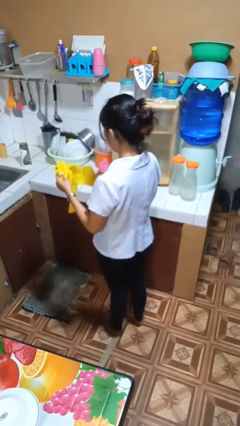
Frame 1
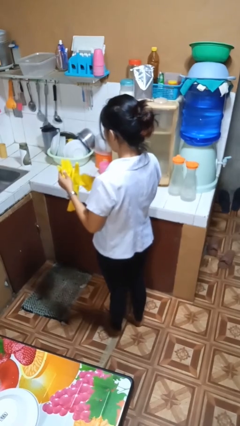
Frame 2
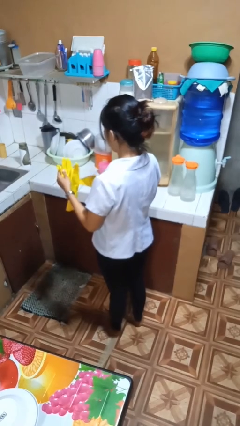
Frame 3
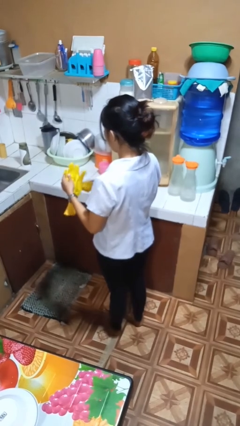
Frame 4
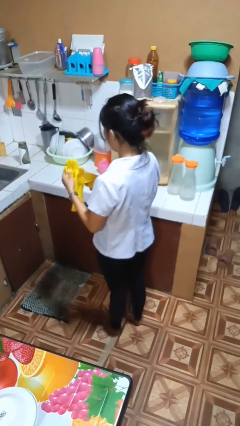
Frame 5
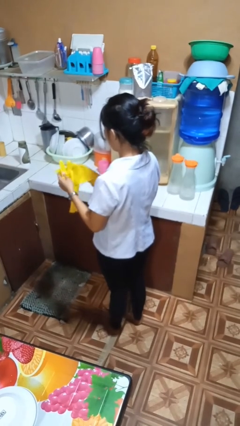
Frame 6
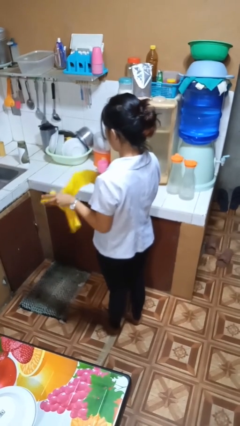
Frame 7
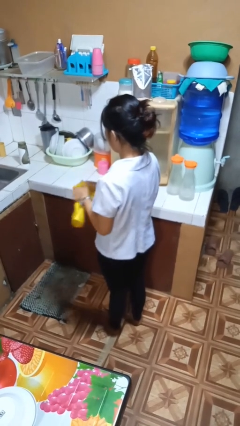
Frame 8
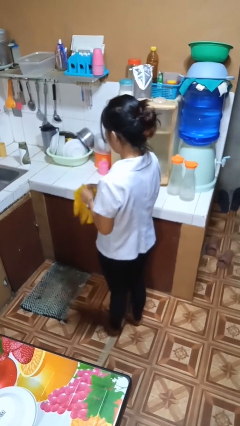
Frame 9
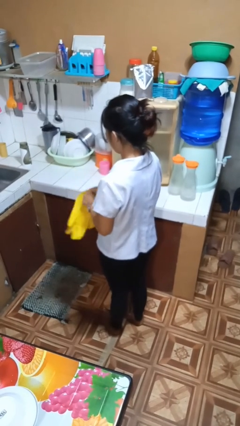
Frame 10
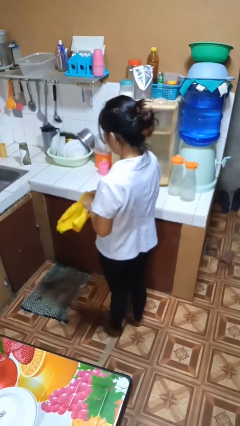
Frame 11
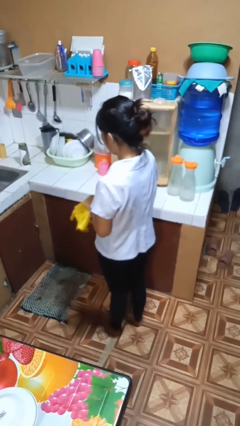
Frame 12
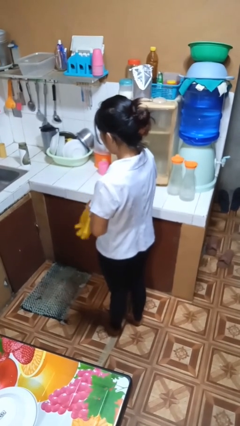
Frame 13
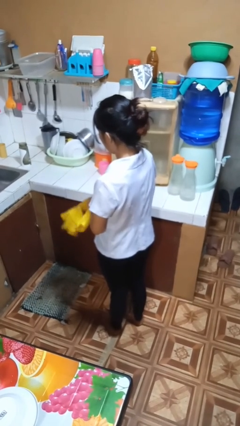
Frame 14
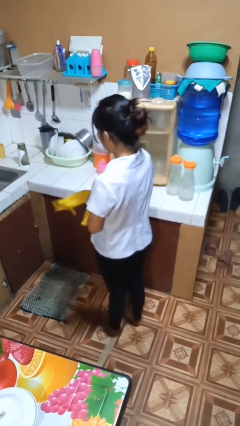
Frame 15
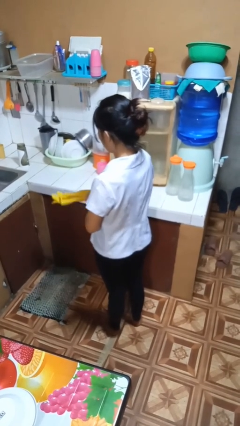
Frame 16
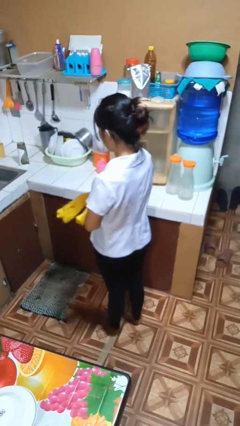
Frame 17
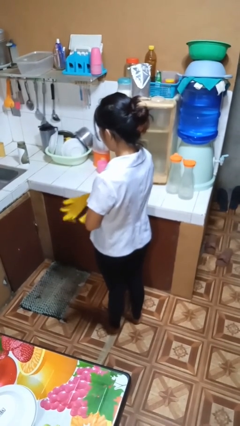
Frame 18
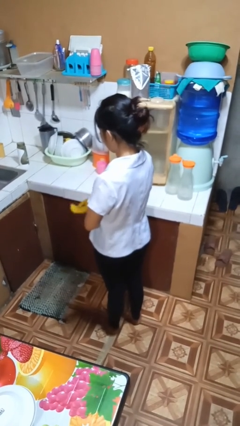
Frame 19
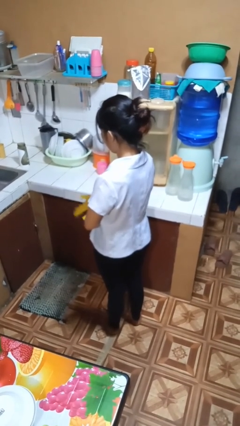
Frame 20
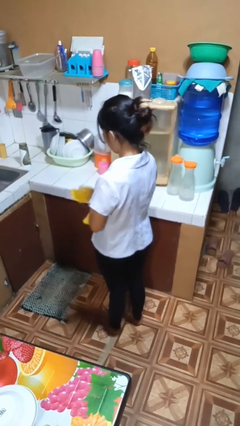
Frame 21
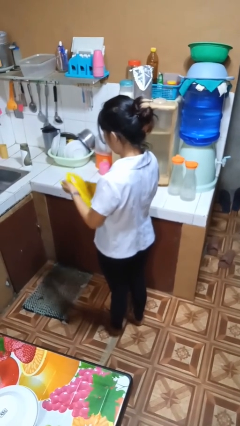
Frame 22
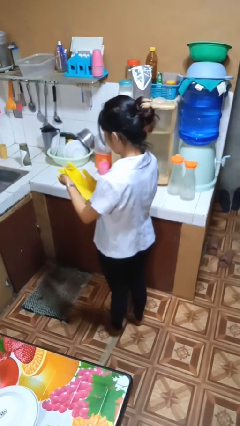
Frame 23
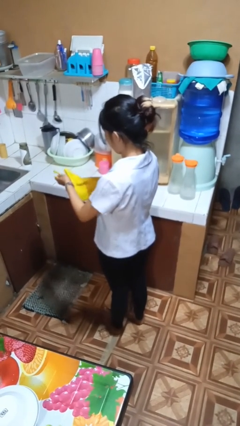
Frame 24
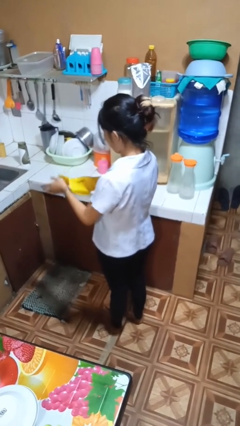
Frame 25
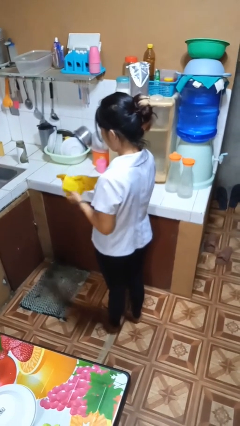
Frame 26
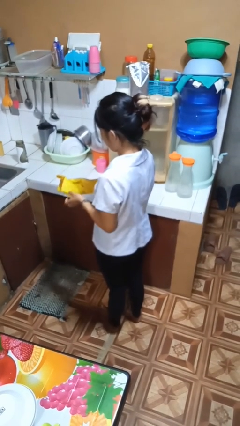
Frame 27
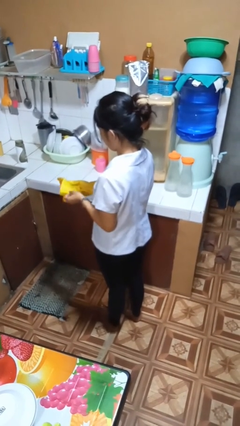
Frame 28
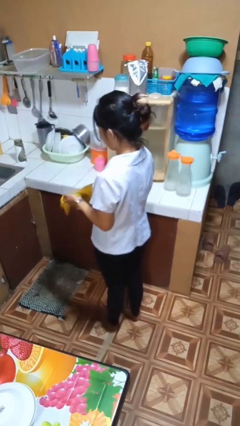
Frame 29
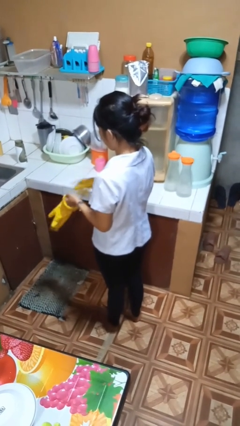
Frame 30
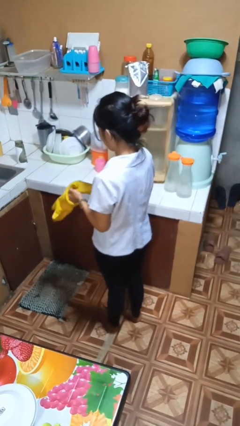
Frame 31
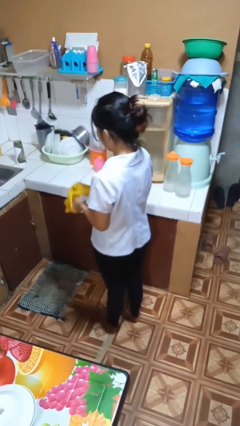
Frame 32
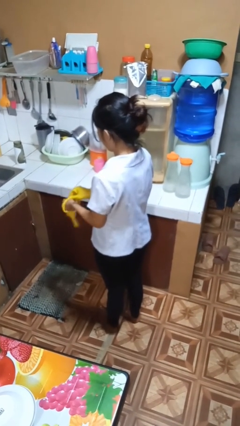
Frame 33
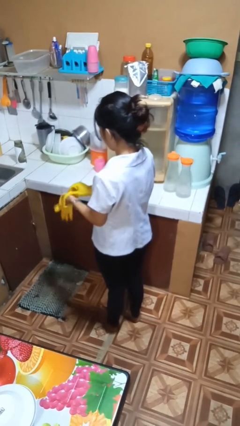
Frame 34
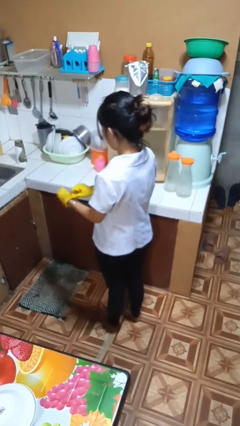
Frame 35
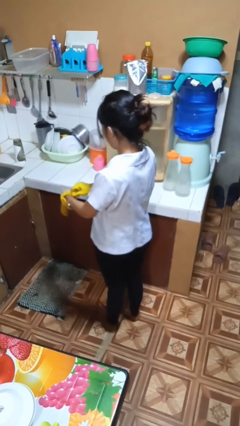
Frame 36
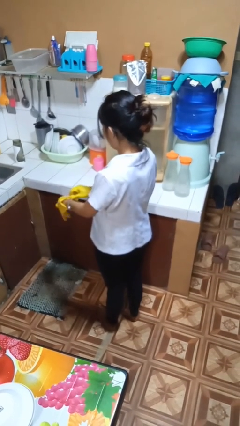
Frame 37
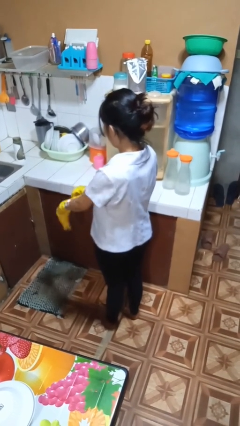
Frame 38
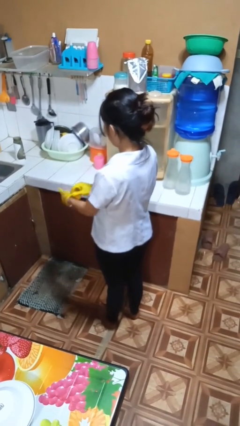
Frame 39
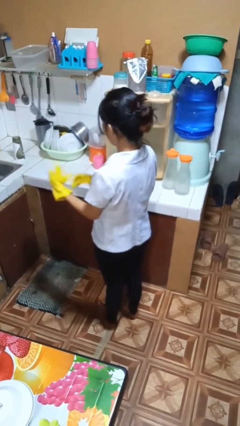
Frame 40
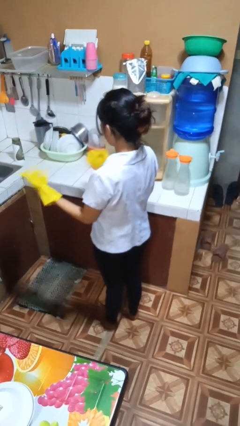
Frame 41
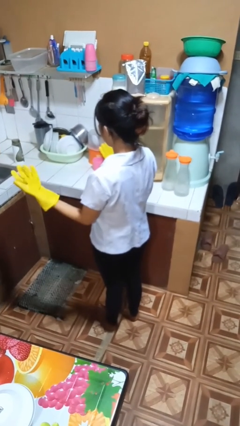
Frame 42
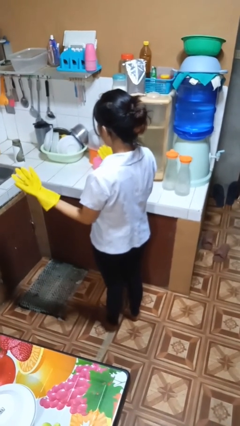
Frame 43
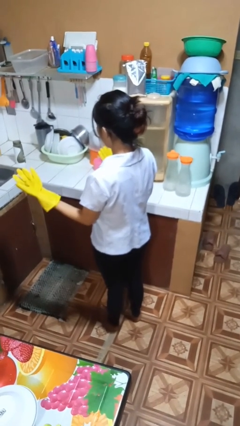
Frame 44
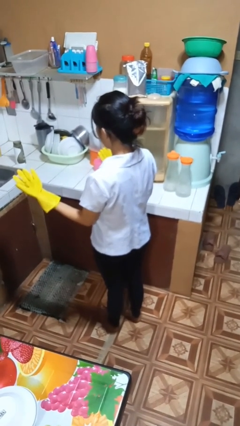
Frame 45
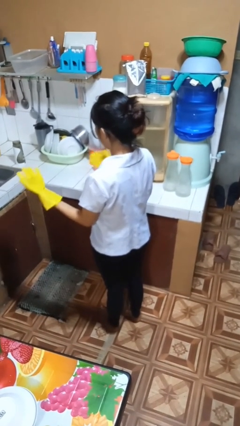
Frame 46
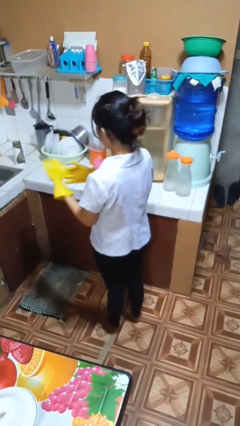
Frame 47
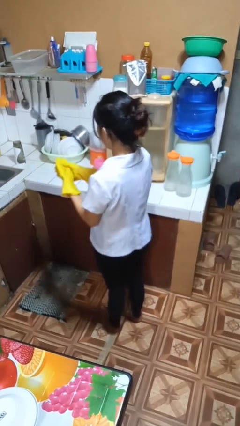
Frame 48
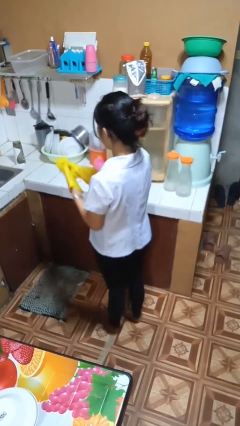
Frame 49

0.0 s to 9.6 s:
person puts on gloves

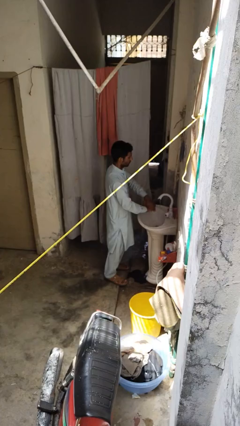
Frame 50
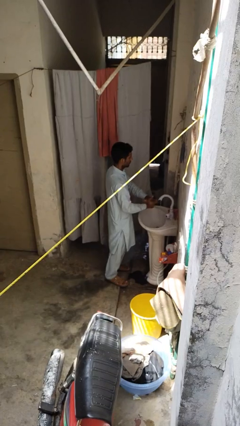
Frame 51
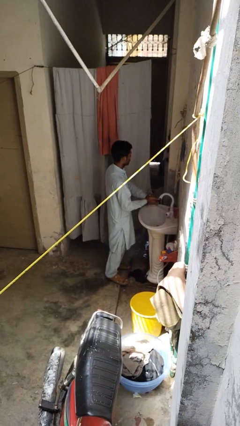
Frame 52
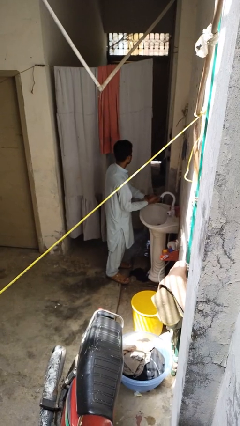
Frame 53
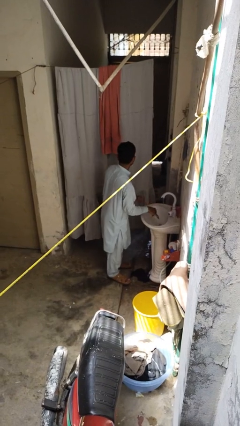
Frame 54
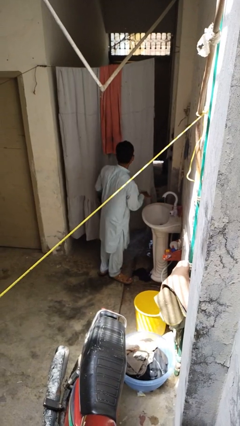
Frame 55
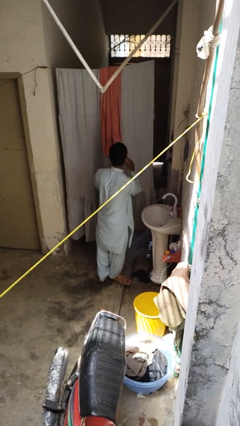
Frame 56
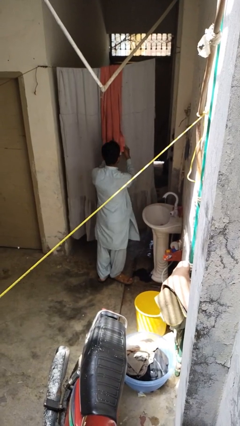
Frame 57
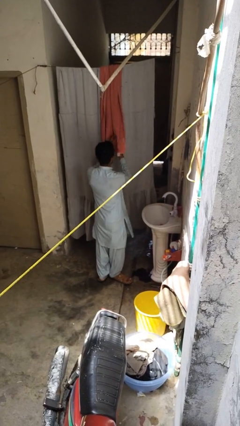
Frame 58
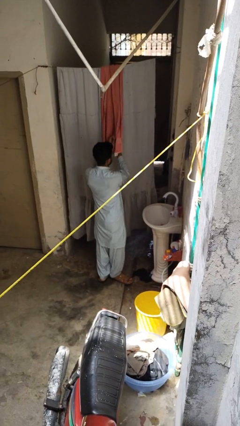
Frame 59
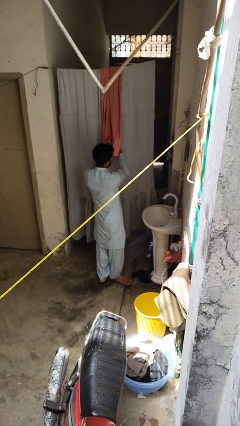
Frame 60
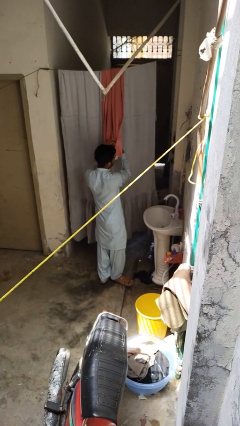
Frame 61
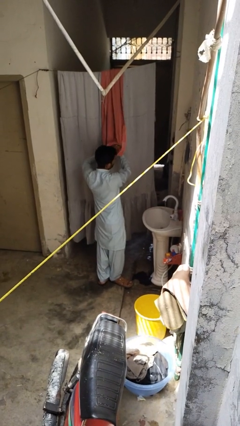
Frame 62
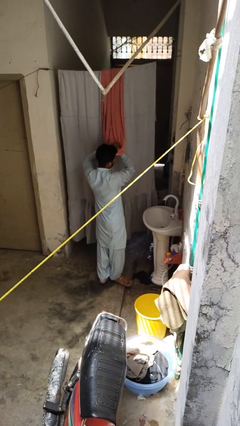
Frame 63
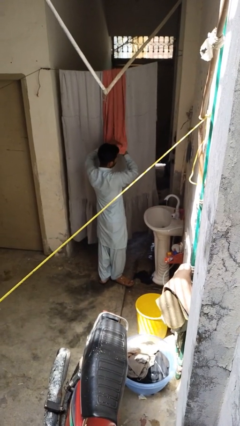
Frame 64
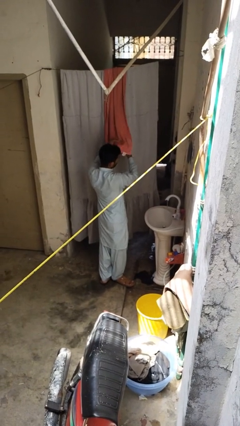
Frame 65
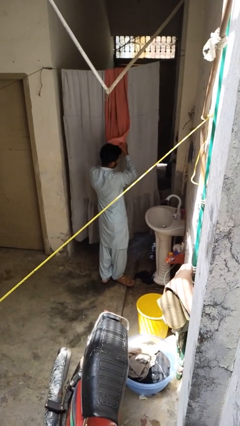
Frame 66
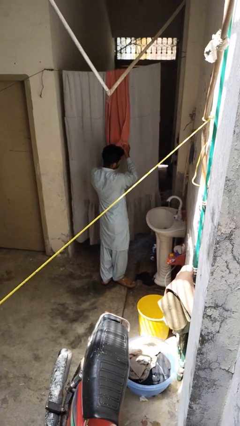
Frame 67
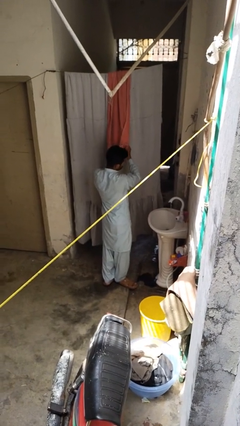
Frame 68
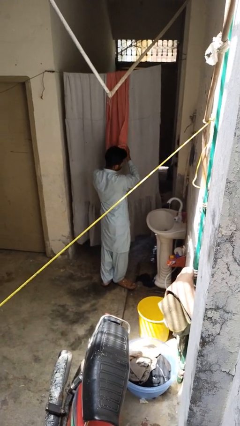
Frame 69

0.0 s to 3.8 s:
person dries hands with towel

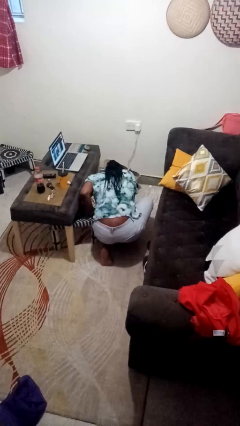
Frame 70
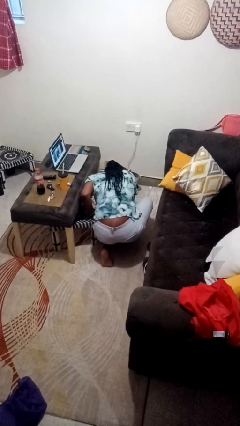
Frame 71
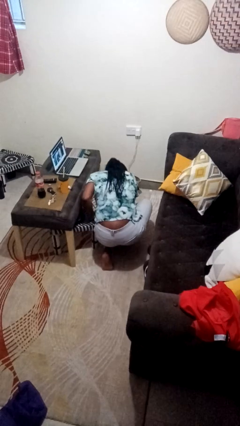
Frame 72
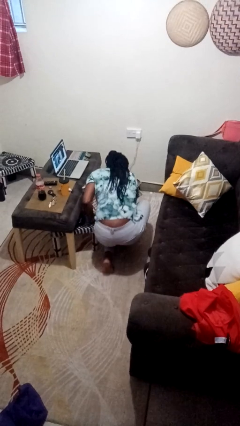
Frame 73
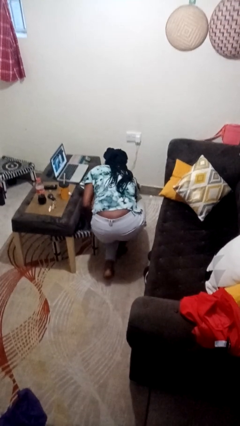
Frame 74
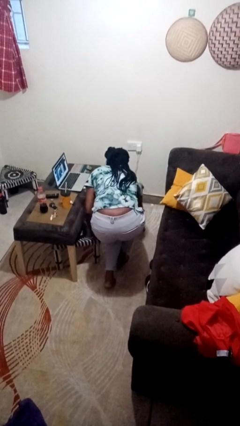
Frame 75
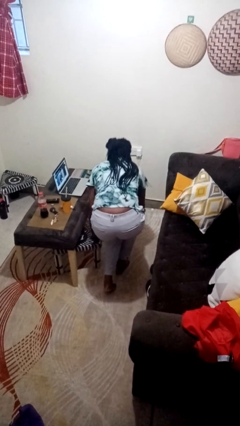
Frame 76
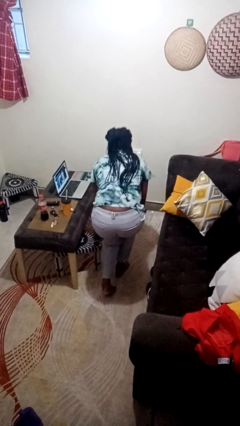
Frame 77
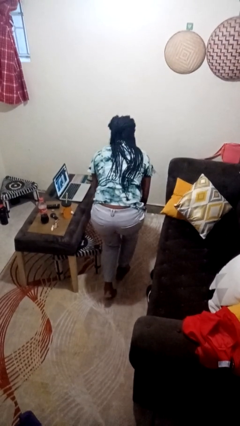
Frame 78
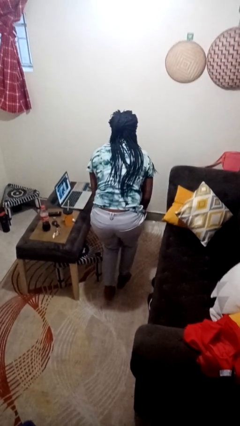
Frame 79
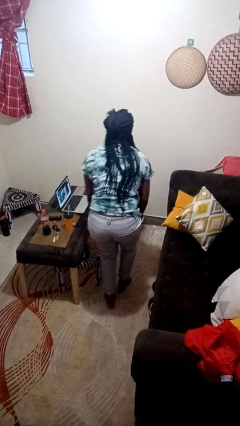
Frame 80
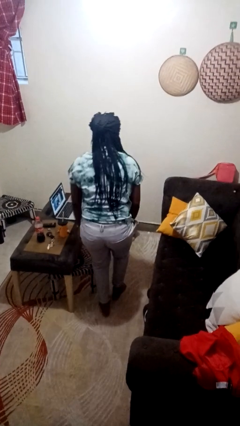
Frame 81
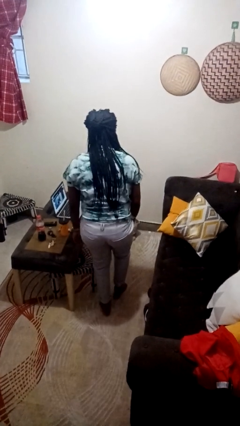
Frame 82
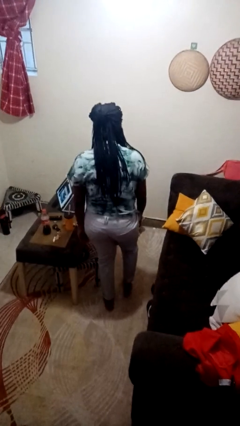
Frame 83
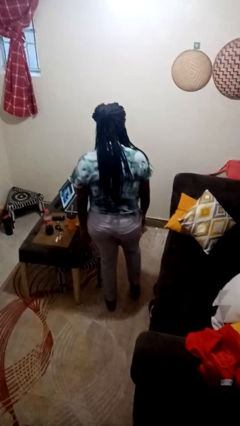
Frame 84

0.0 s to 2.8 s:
person stands up from floor

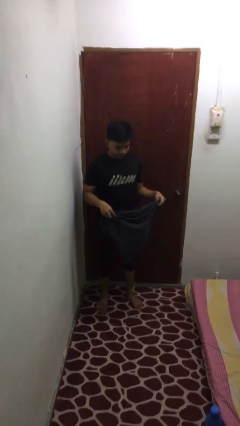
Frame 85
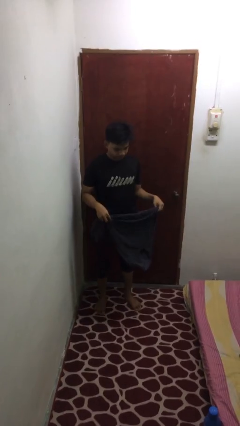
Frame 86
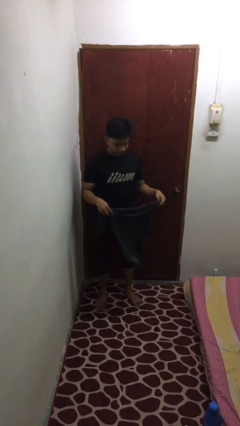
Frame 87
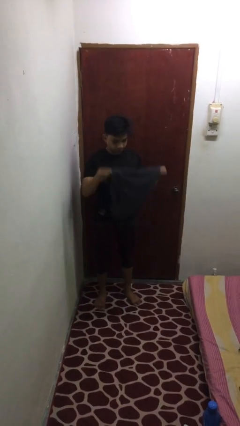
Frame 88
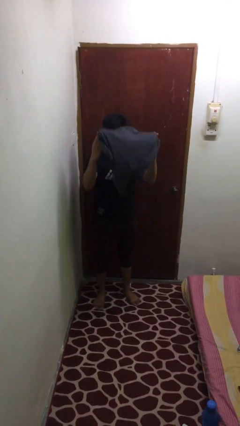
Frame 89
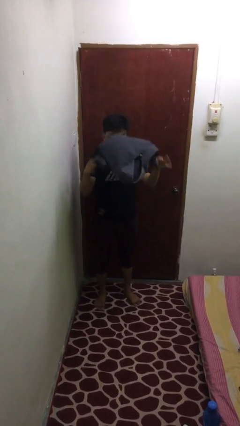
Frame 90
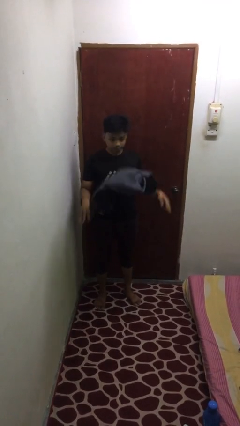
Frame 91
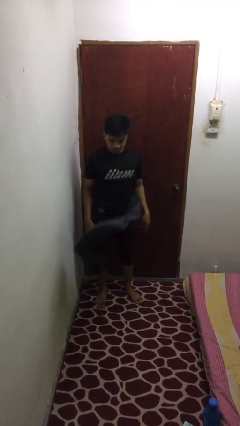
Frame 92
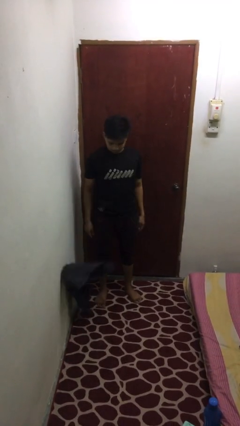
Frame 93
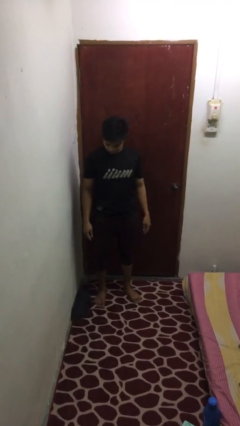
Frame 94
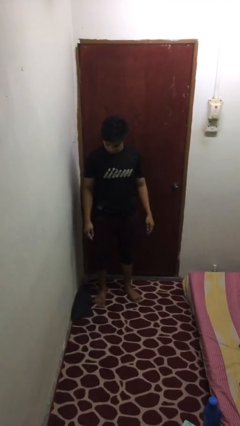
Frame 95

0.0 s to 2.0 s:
person throws object into air
